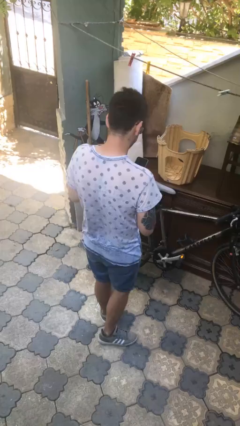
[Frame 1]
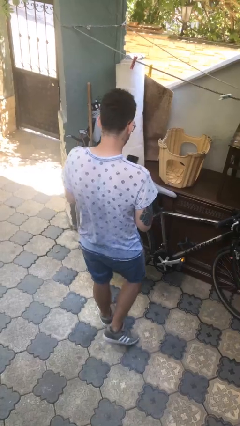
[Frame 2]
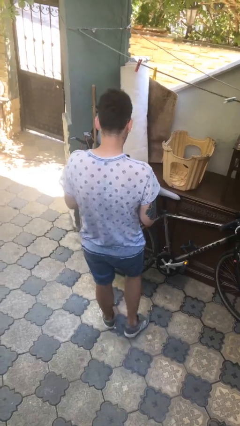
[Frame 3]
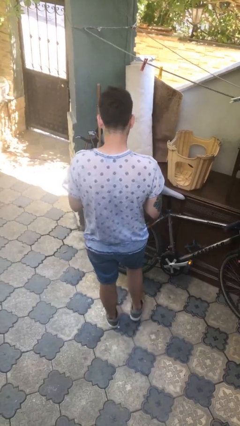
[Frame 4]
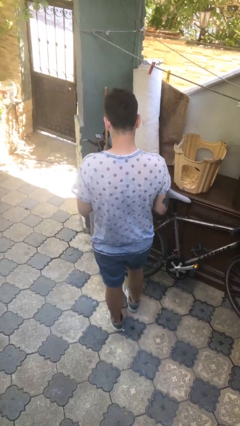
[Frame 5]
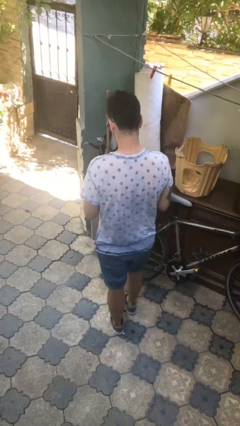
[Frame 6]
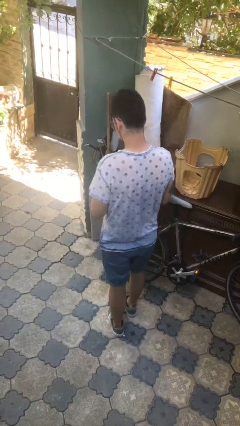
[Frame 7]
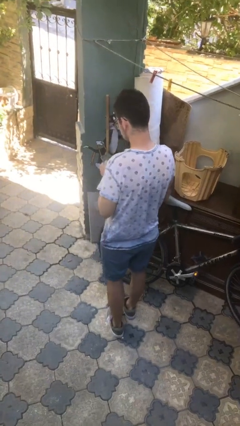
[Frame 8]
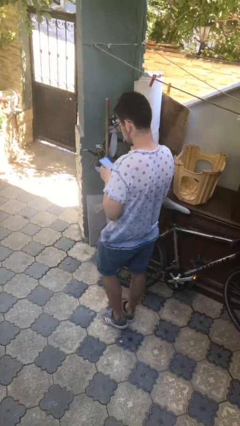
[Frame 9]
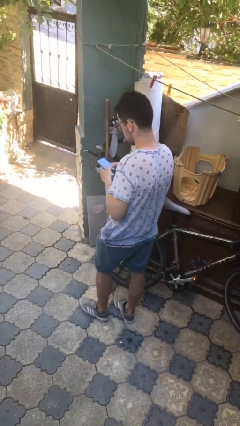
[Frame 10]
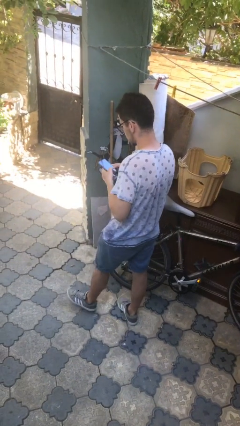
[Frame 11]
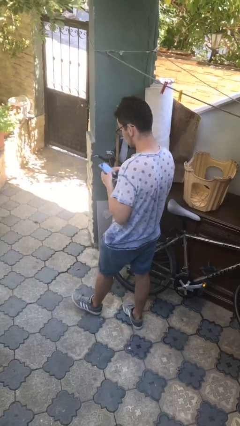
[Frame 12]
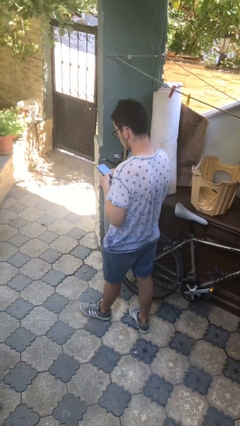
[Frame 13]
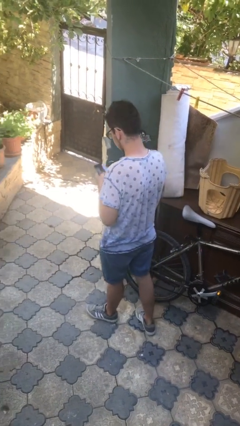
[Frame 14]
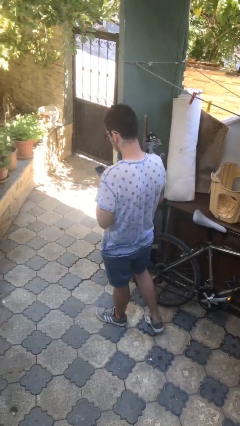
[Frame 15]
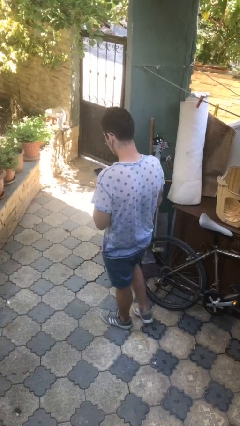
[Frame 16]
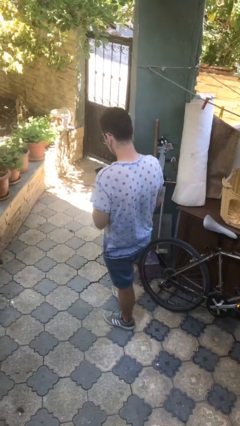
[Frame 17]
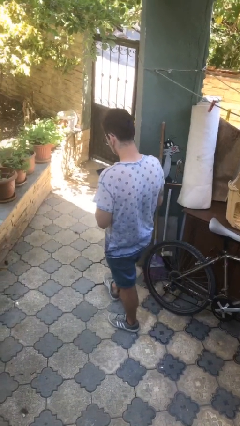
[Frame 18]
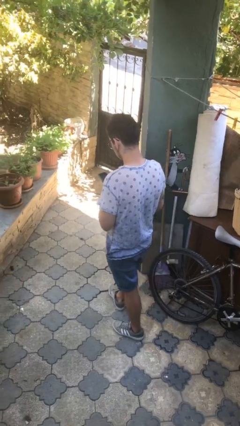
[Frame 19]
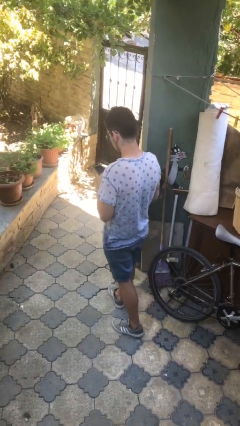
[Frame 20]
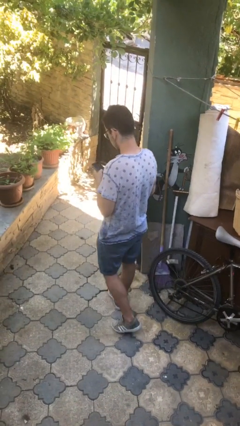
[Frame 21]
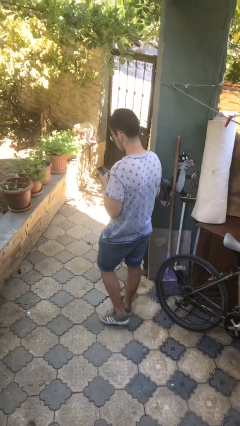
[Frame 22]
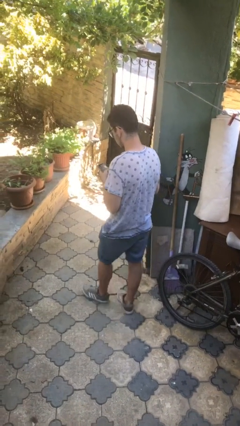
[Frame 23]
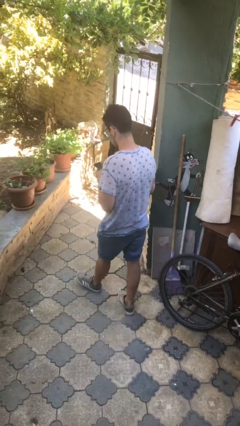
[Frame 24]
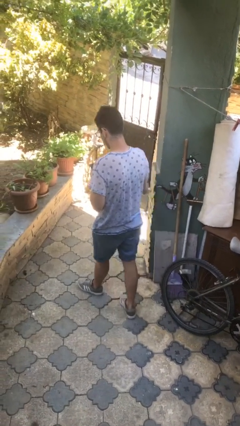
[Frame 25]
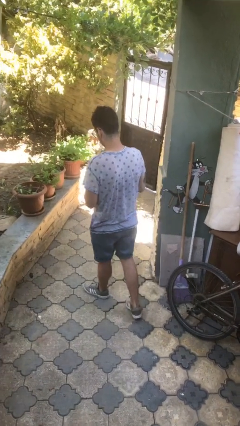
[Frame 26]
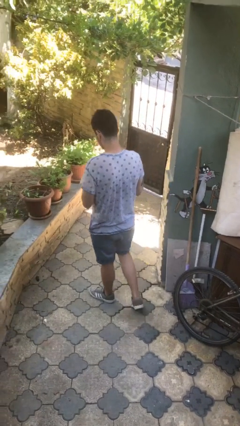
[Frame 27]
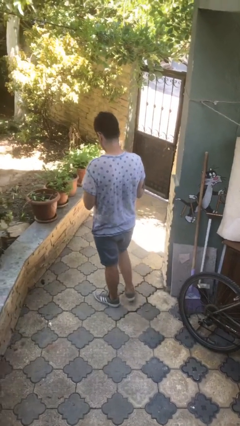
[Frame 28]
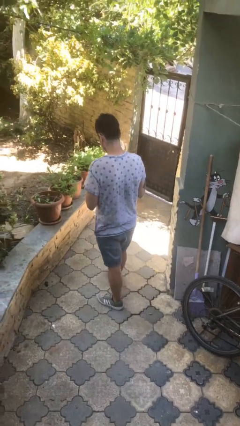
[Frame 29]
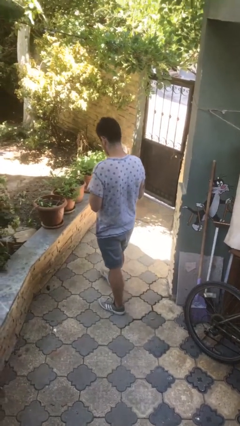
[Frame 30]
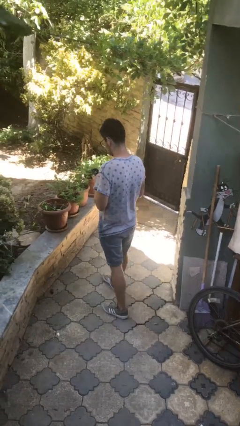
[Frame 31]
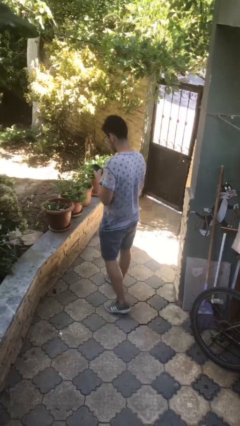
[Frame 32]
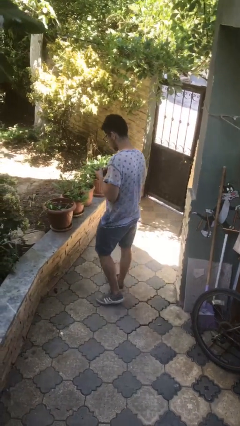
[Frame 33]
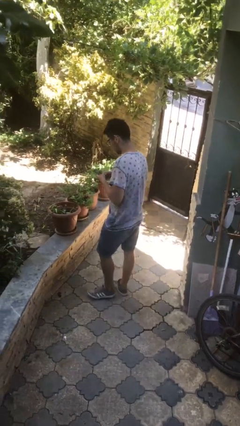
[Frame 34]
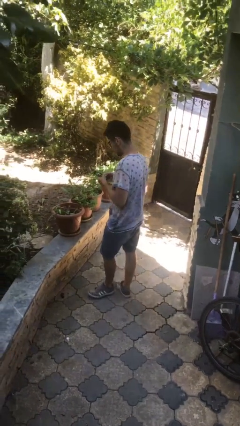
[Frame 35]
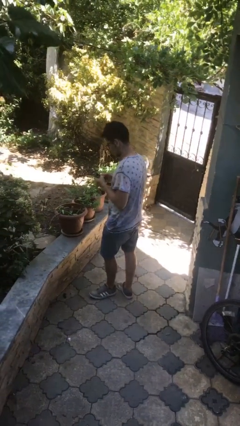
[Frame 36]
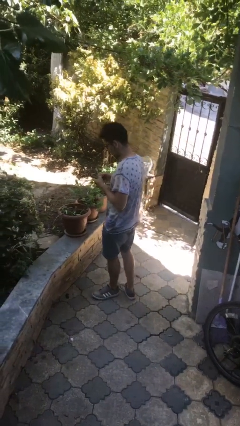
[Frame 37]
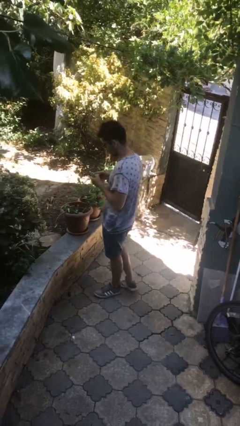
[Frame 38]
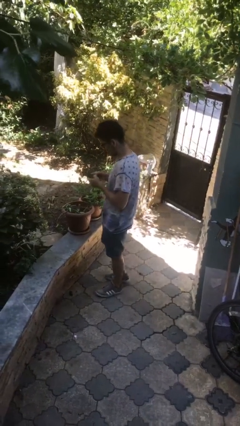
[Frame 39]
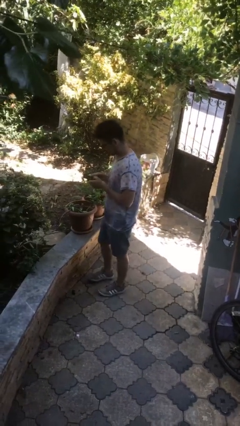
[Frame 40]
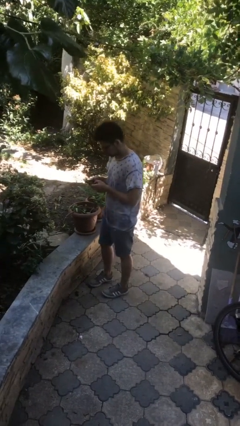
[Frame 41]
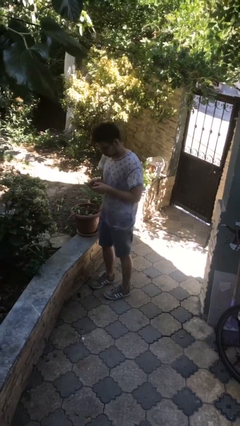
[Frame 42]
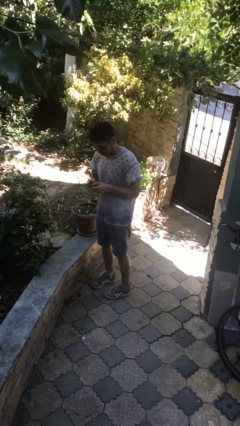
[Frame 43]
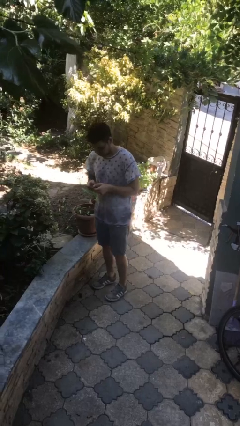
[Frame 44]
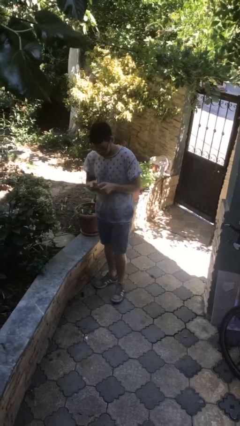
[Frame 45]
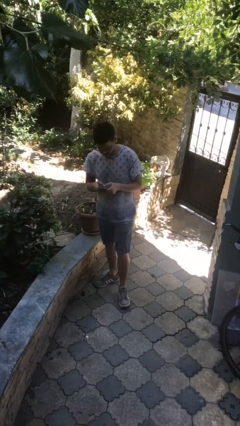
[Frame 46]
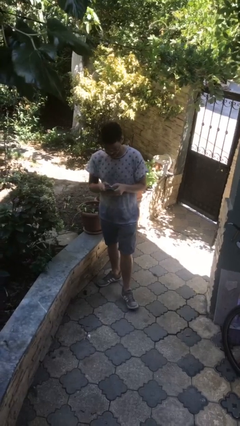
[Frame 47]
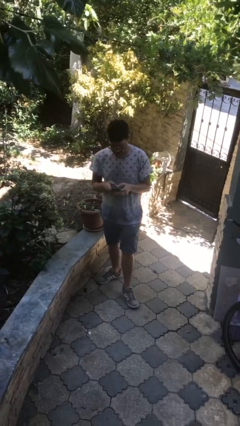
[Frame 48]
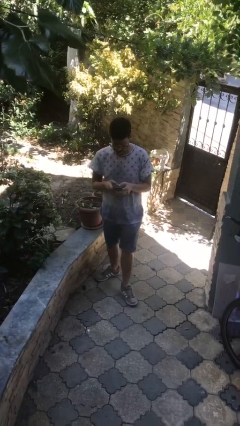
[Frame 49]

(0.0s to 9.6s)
person texts on phone

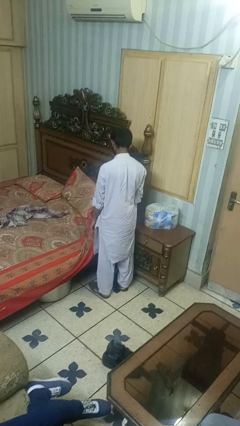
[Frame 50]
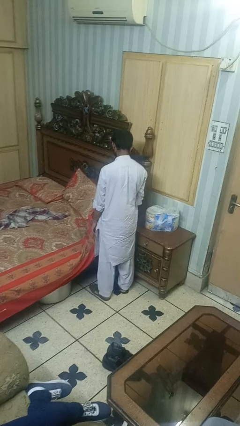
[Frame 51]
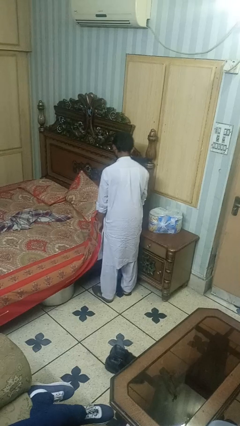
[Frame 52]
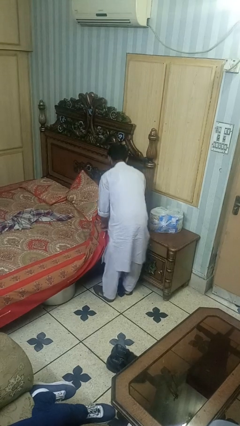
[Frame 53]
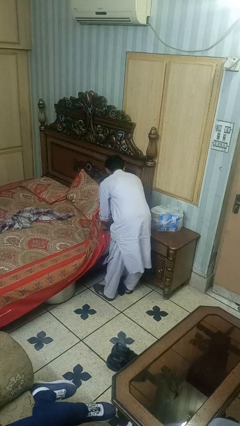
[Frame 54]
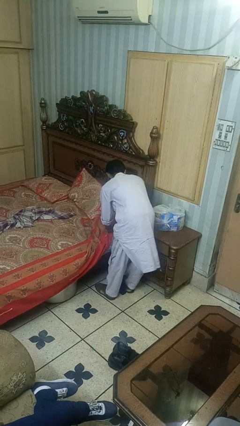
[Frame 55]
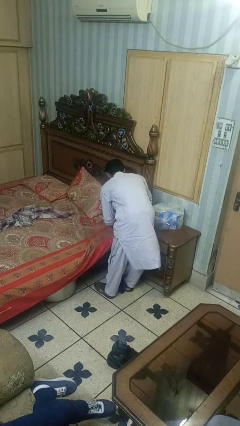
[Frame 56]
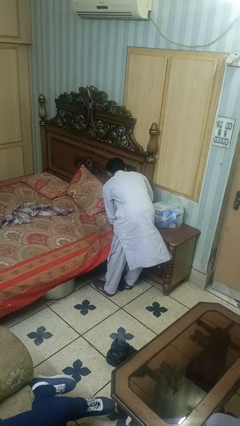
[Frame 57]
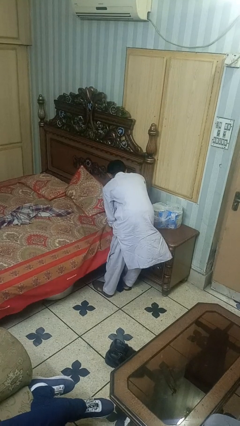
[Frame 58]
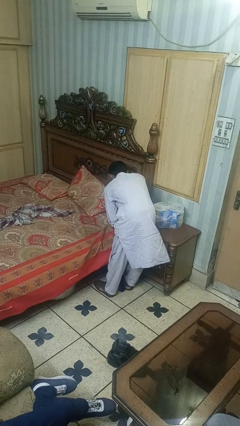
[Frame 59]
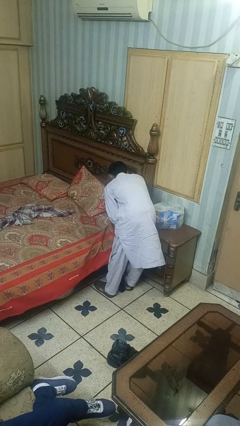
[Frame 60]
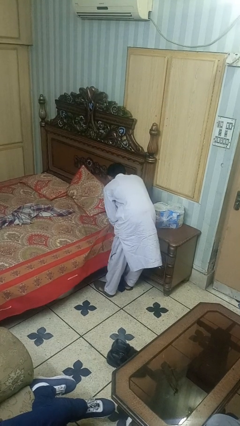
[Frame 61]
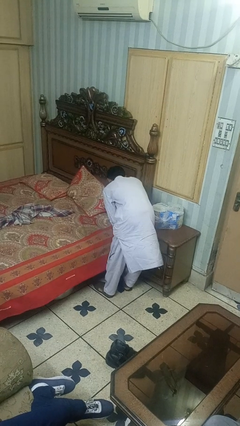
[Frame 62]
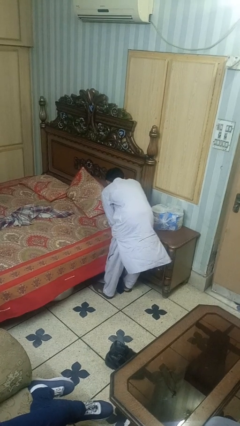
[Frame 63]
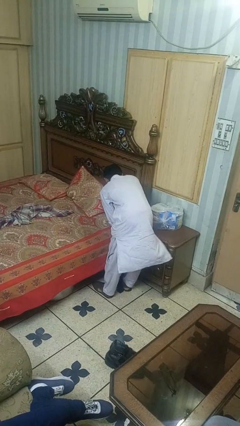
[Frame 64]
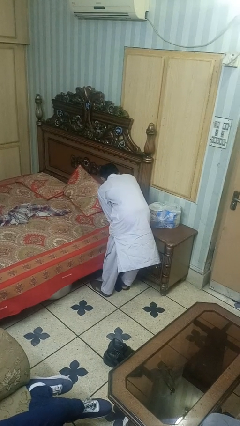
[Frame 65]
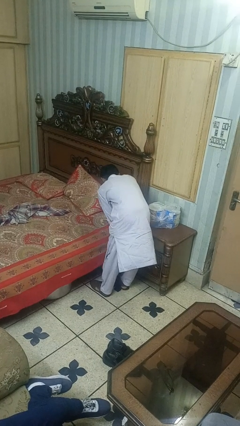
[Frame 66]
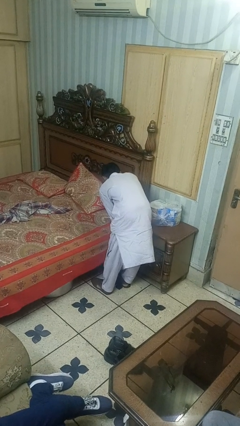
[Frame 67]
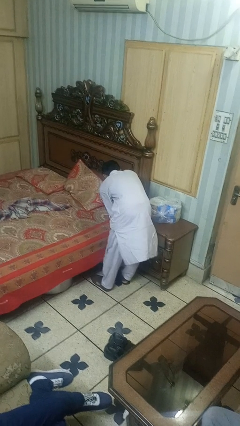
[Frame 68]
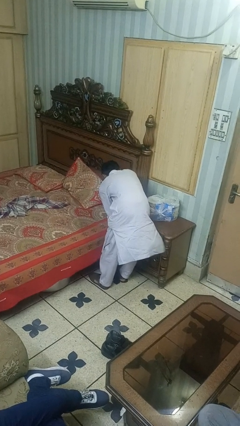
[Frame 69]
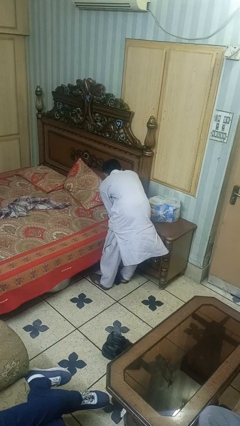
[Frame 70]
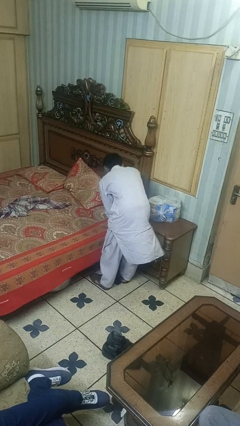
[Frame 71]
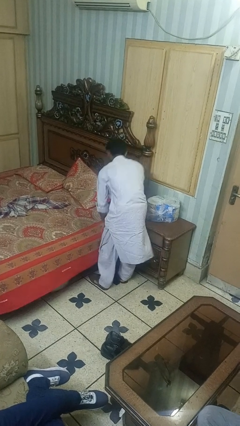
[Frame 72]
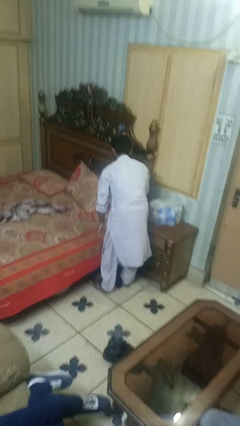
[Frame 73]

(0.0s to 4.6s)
person makes bed

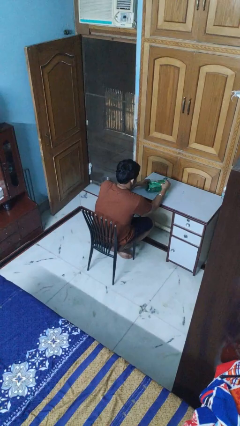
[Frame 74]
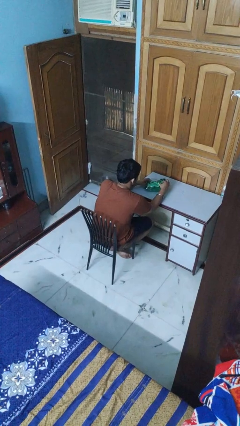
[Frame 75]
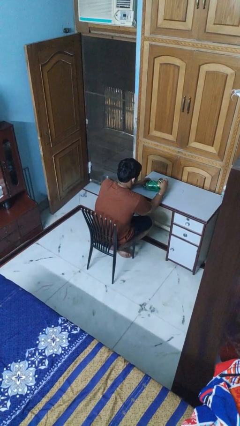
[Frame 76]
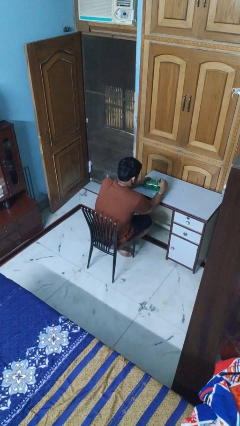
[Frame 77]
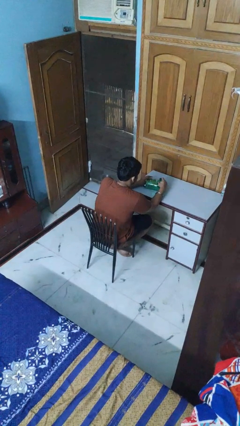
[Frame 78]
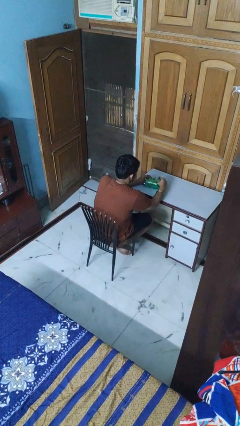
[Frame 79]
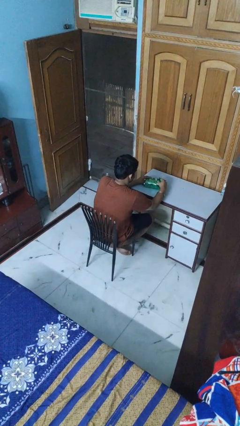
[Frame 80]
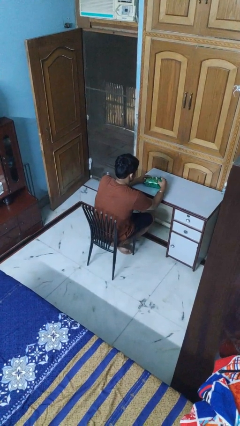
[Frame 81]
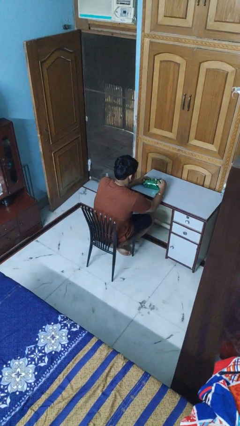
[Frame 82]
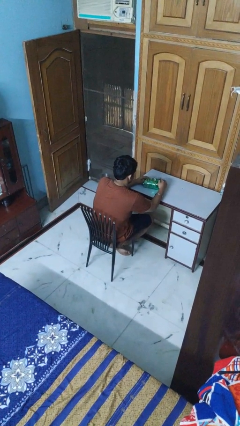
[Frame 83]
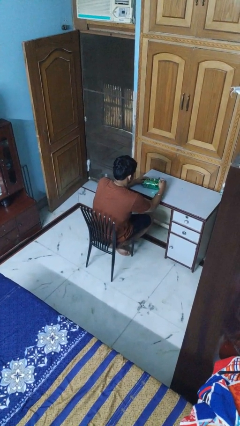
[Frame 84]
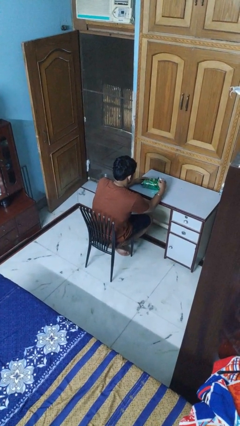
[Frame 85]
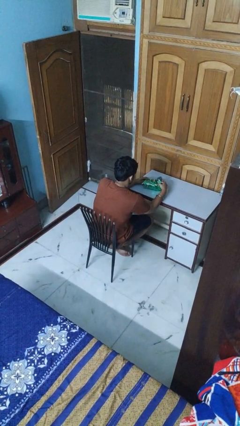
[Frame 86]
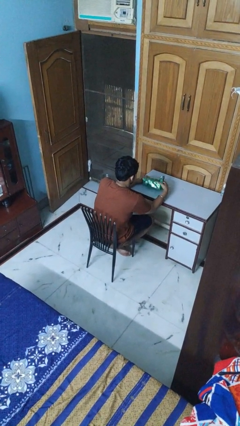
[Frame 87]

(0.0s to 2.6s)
person wraps box

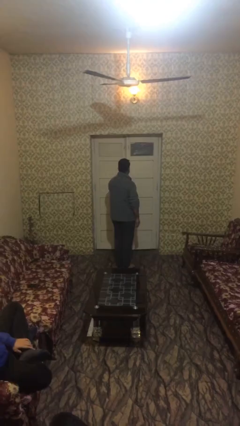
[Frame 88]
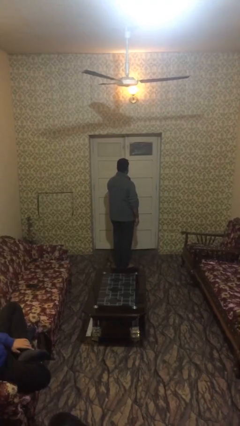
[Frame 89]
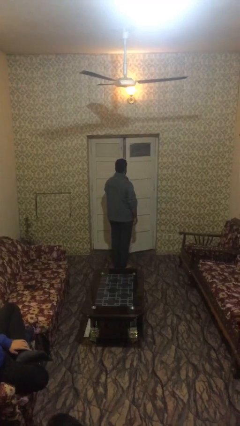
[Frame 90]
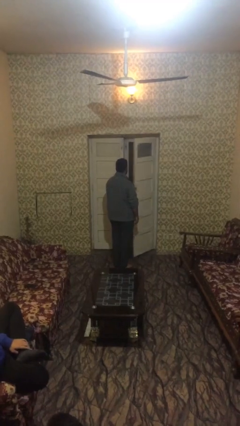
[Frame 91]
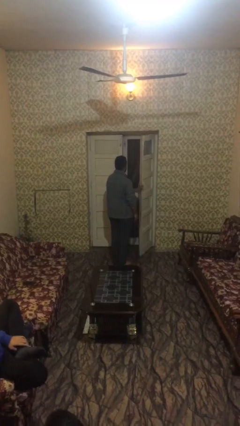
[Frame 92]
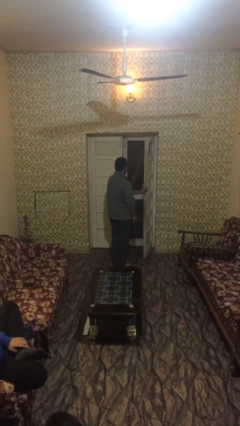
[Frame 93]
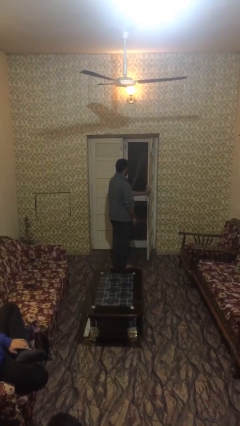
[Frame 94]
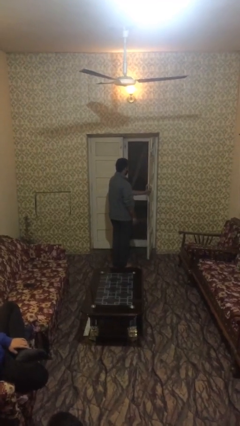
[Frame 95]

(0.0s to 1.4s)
person opens facility door
